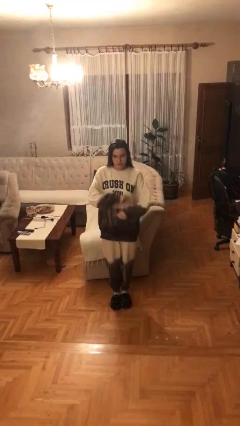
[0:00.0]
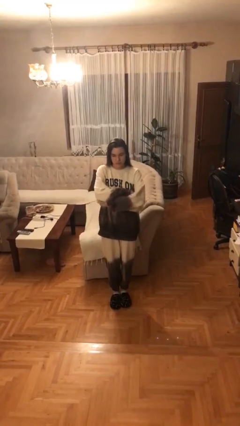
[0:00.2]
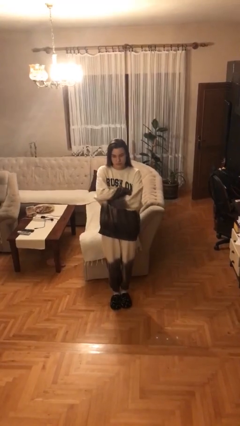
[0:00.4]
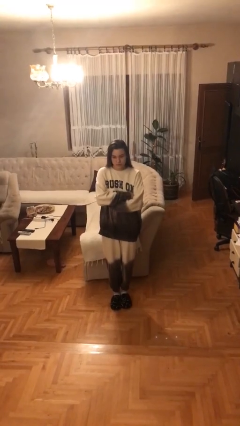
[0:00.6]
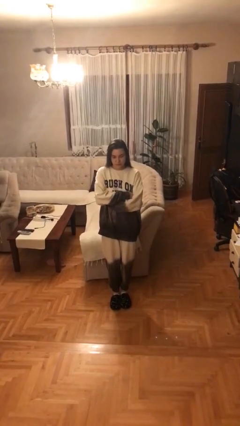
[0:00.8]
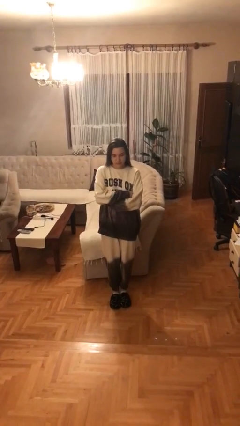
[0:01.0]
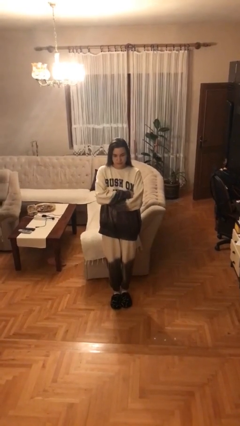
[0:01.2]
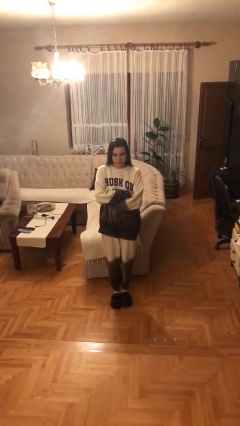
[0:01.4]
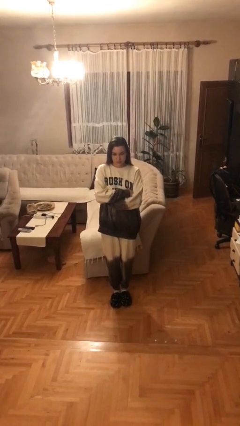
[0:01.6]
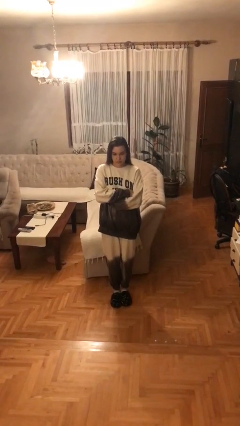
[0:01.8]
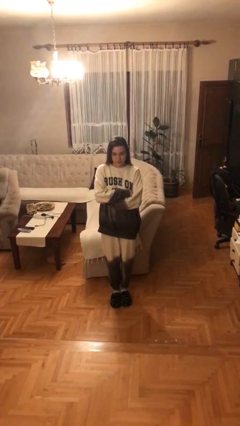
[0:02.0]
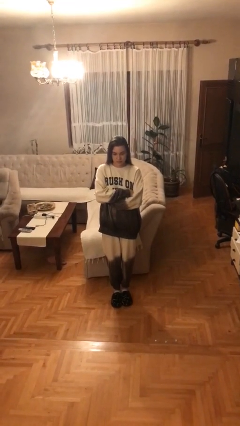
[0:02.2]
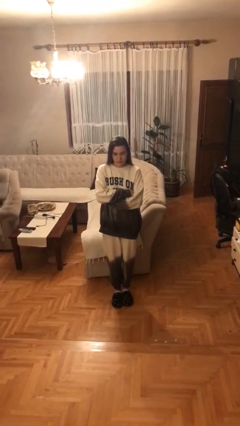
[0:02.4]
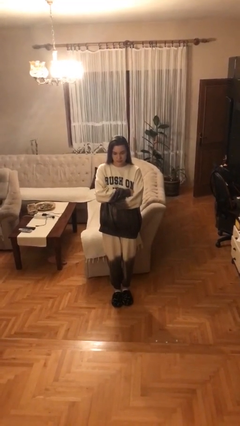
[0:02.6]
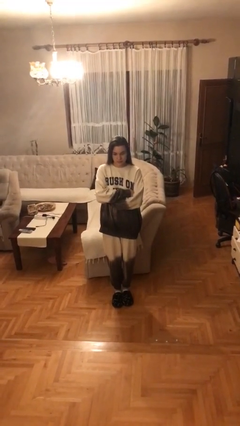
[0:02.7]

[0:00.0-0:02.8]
person crosses arms

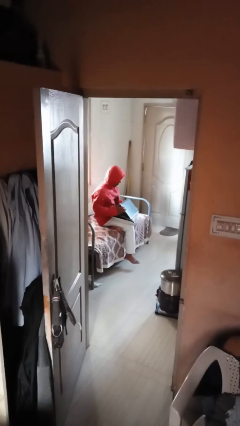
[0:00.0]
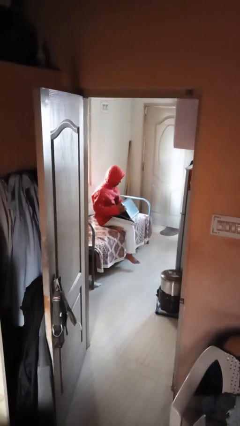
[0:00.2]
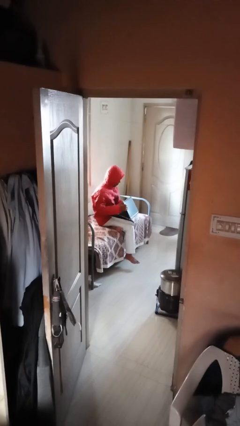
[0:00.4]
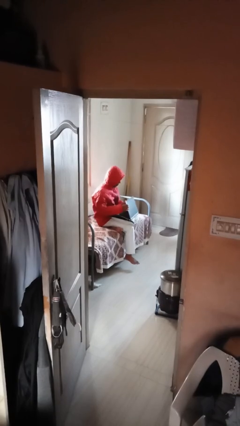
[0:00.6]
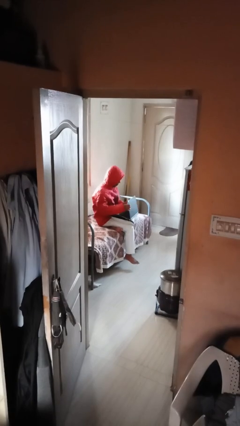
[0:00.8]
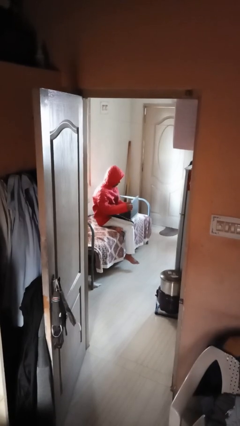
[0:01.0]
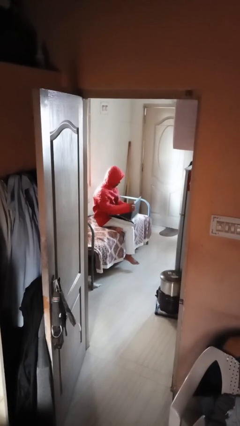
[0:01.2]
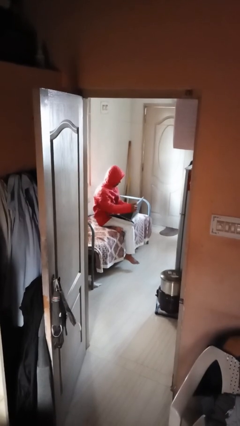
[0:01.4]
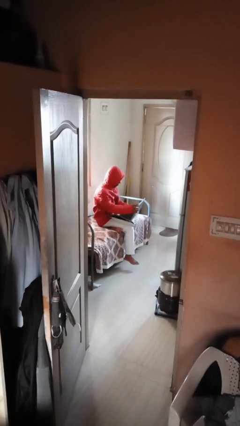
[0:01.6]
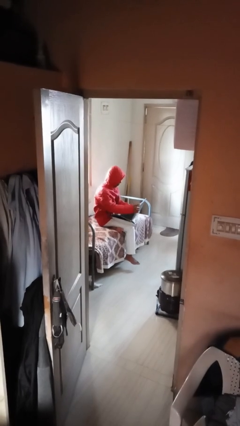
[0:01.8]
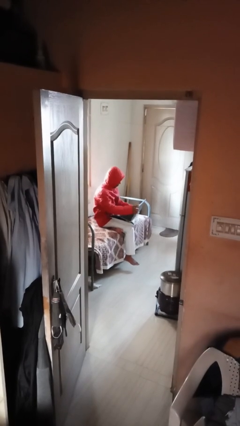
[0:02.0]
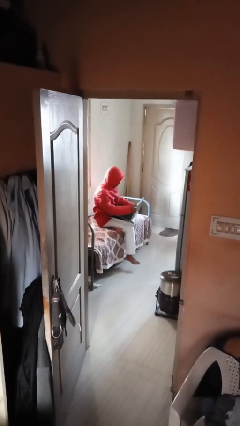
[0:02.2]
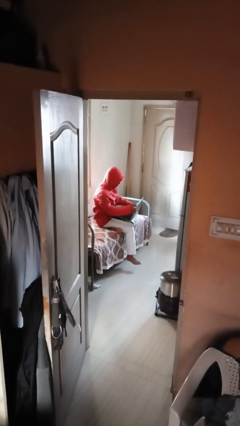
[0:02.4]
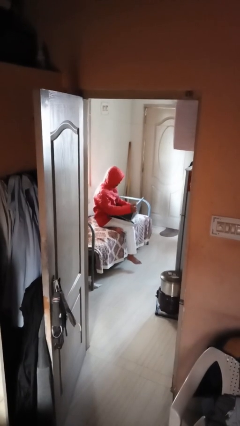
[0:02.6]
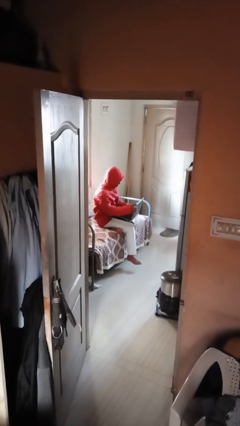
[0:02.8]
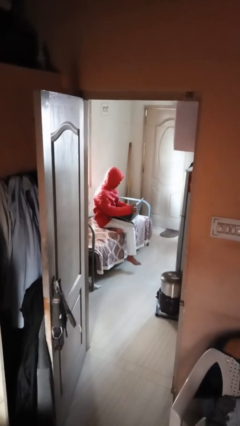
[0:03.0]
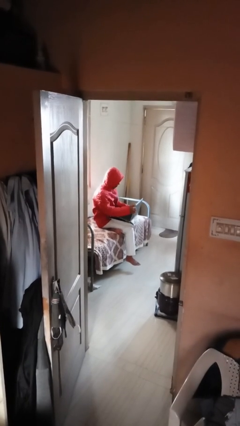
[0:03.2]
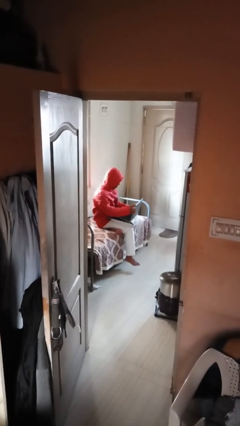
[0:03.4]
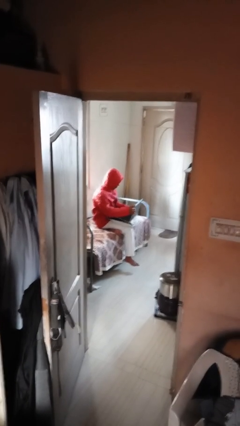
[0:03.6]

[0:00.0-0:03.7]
person interacts with laptop

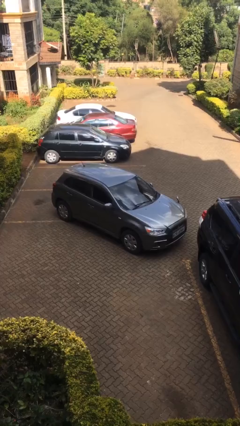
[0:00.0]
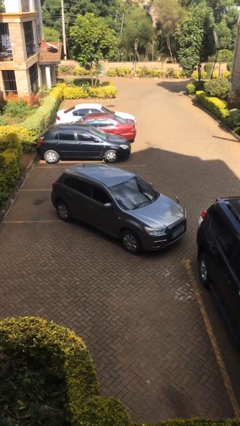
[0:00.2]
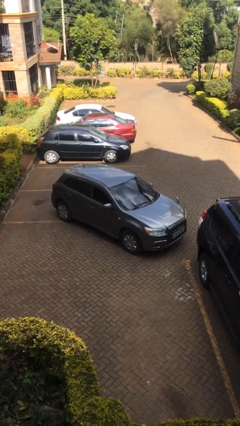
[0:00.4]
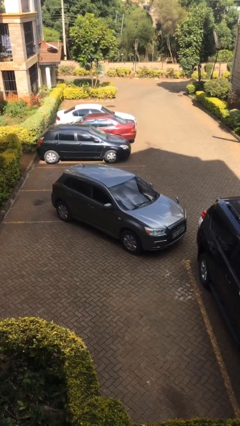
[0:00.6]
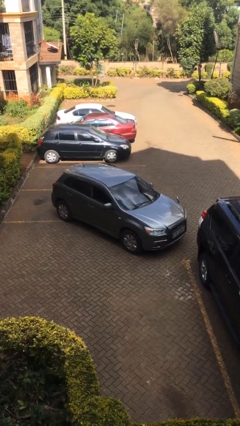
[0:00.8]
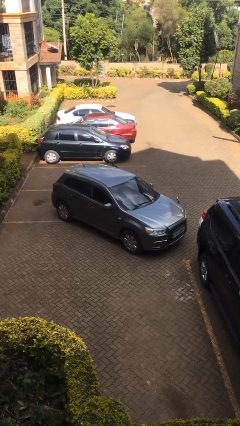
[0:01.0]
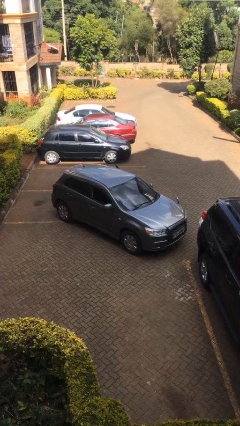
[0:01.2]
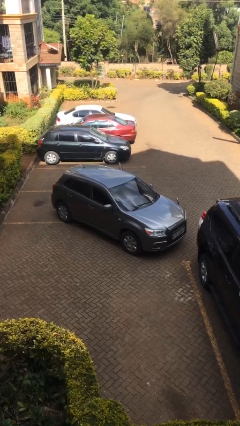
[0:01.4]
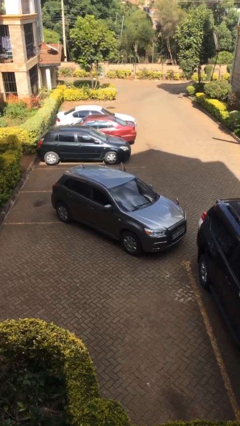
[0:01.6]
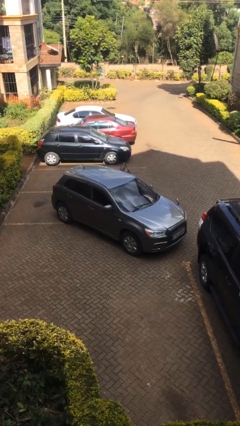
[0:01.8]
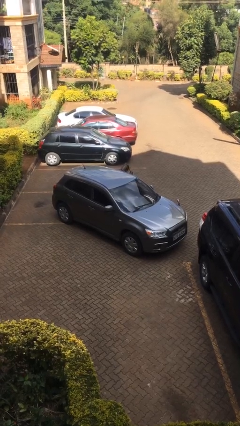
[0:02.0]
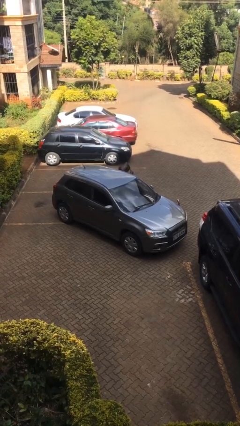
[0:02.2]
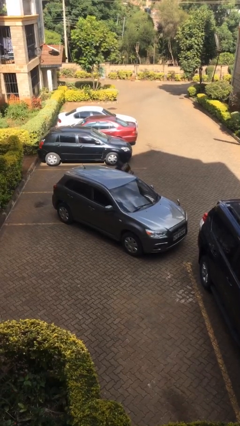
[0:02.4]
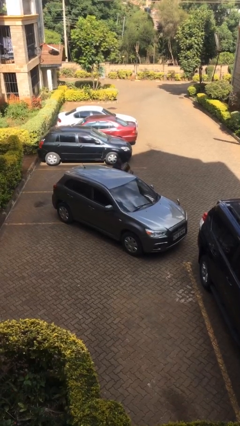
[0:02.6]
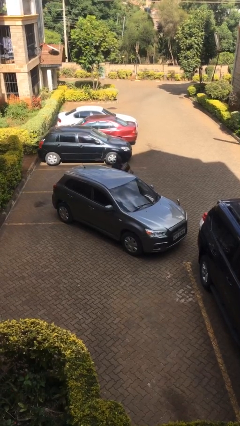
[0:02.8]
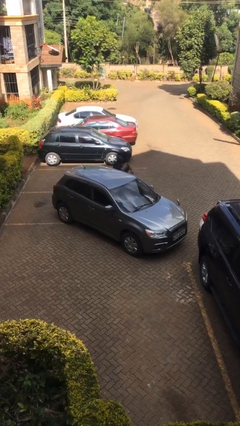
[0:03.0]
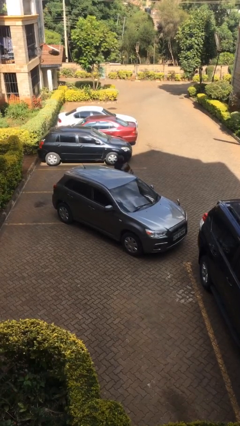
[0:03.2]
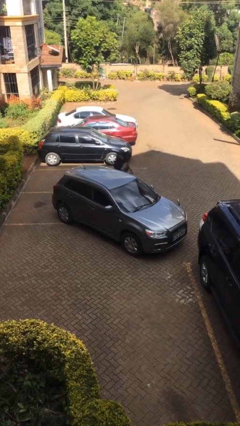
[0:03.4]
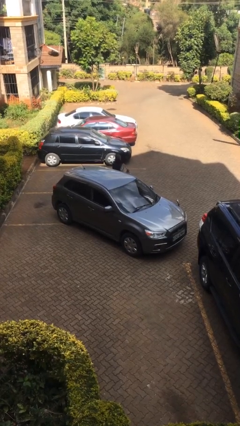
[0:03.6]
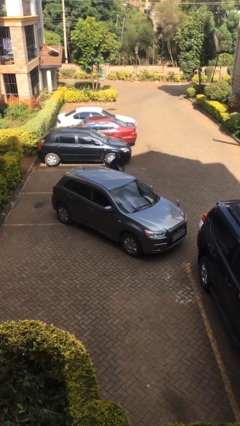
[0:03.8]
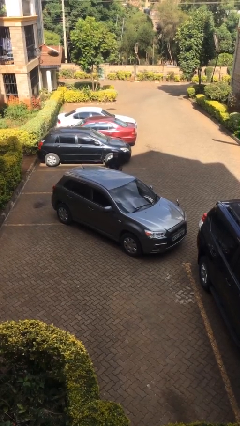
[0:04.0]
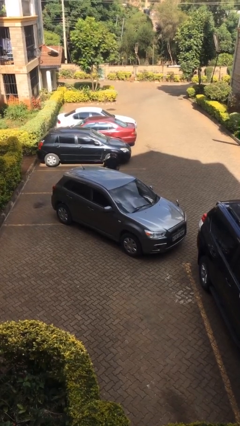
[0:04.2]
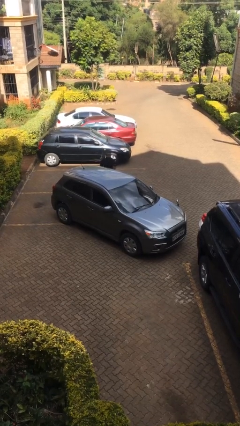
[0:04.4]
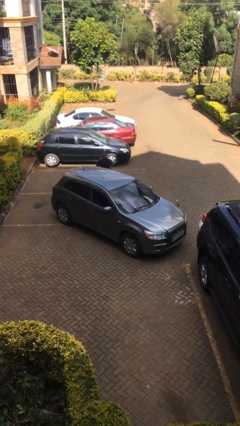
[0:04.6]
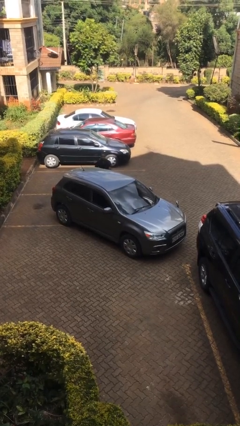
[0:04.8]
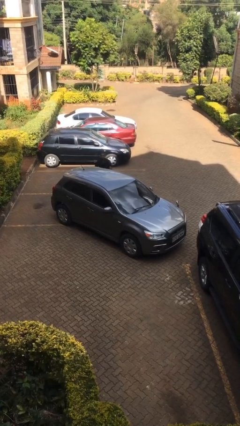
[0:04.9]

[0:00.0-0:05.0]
car drops off person

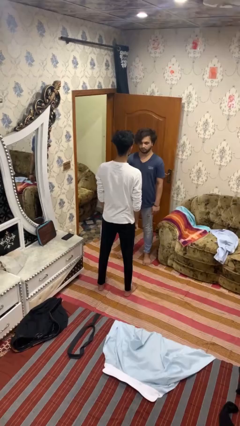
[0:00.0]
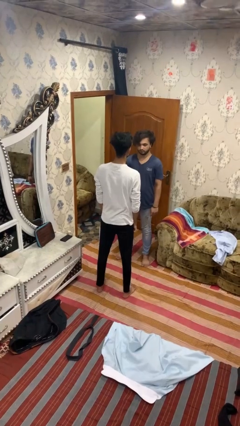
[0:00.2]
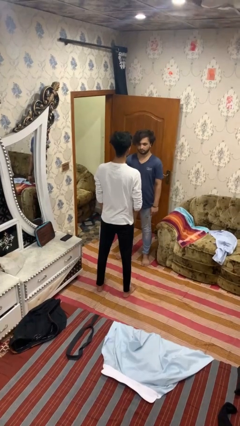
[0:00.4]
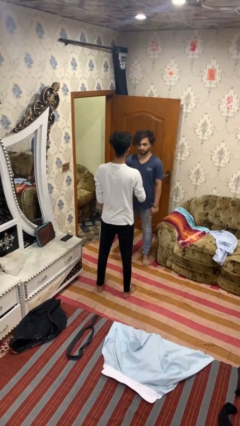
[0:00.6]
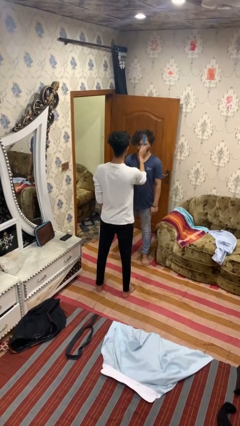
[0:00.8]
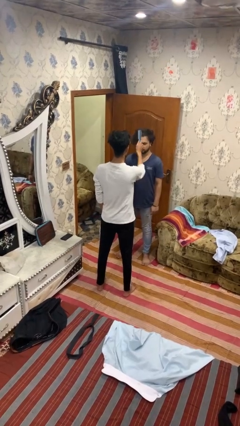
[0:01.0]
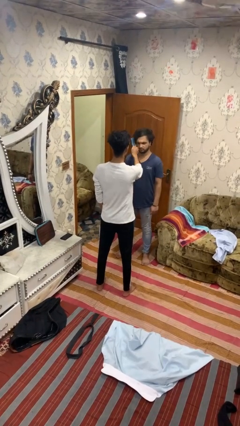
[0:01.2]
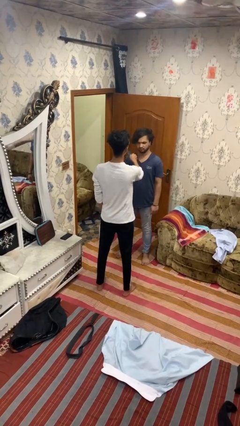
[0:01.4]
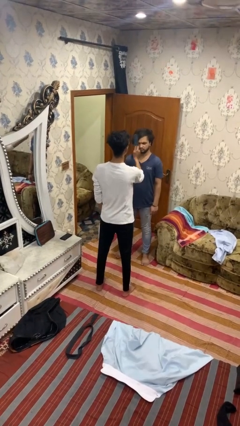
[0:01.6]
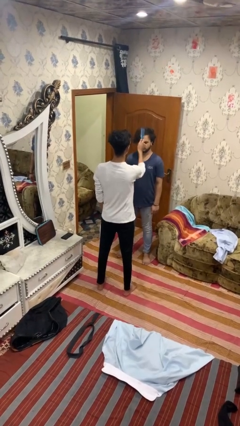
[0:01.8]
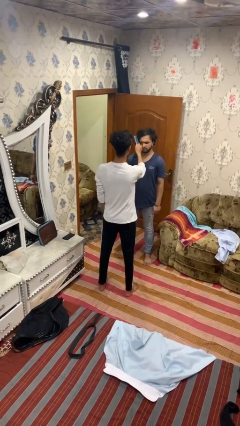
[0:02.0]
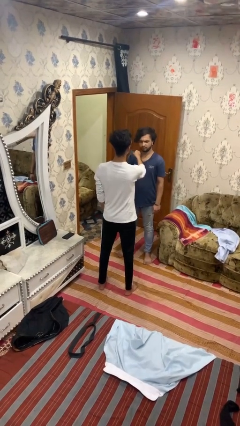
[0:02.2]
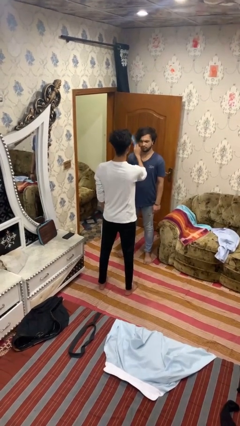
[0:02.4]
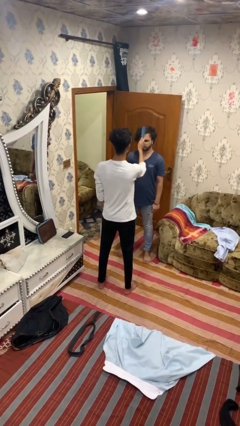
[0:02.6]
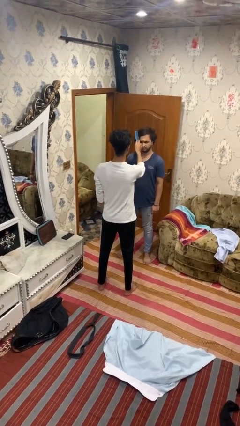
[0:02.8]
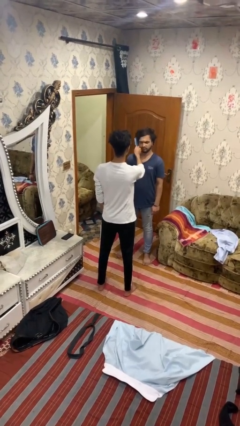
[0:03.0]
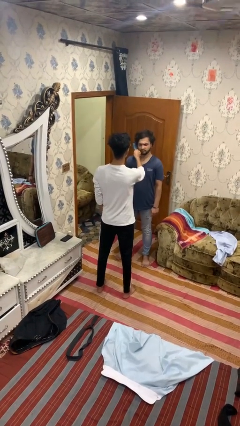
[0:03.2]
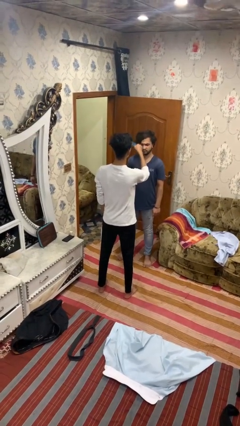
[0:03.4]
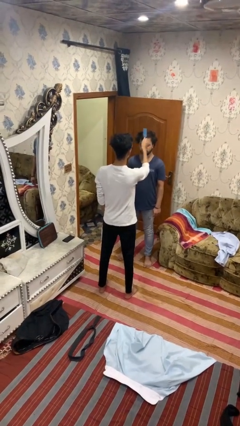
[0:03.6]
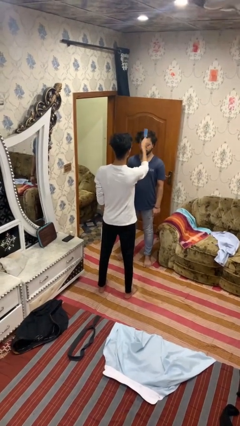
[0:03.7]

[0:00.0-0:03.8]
person brushes hair of person

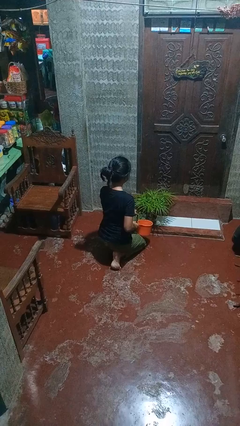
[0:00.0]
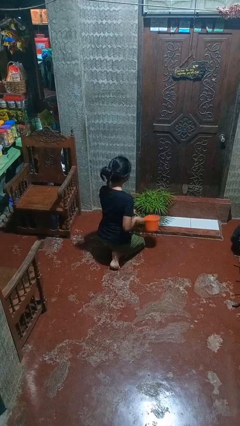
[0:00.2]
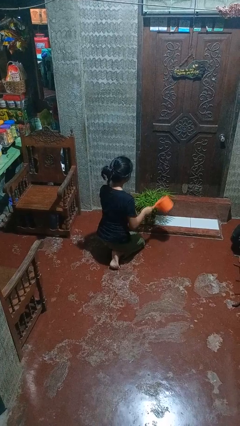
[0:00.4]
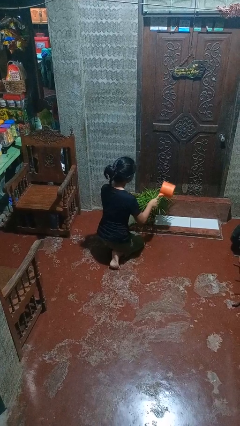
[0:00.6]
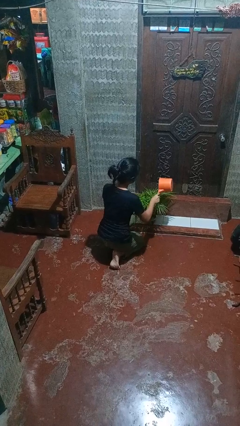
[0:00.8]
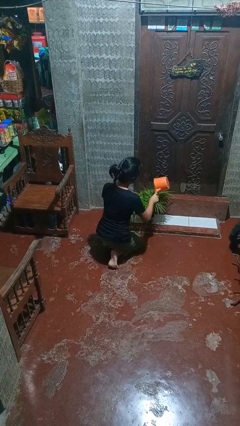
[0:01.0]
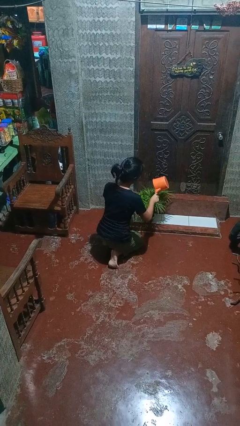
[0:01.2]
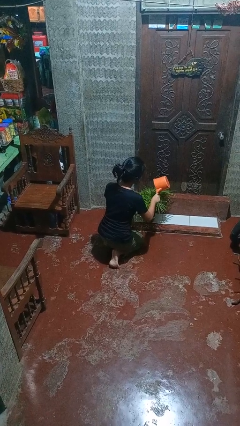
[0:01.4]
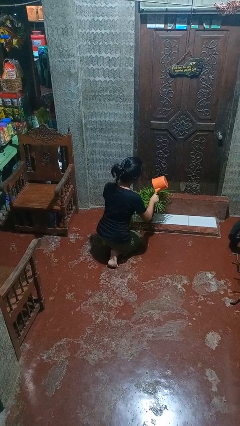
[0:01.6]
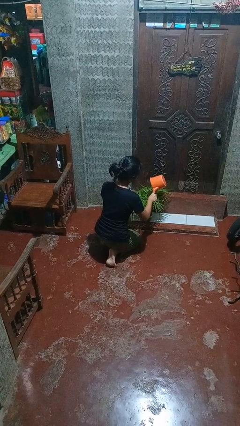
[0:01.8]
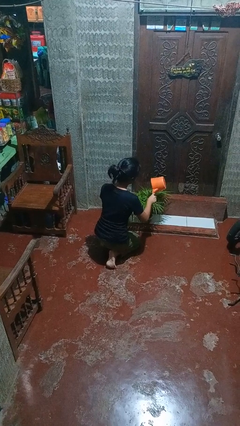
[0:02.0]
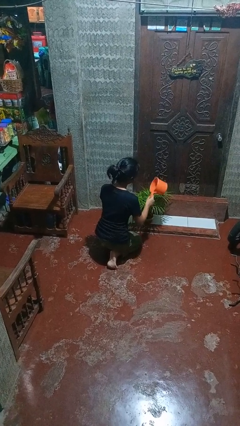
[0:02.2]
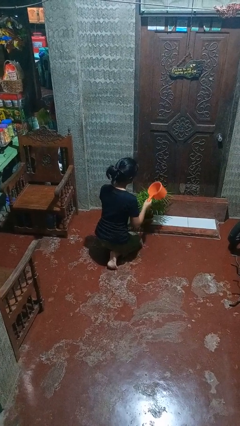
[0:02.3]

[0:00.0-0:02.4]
person waters houseplant
